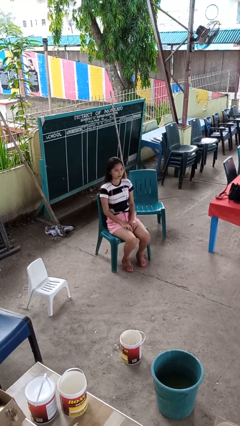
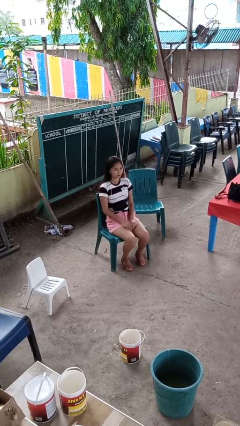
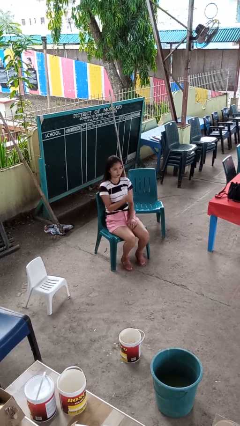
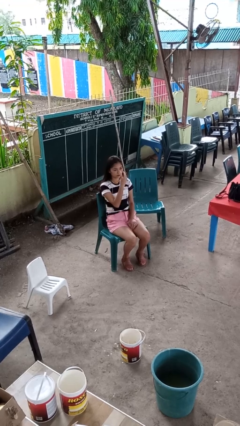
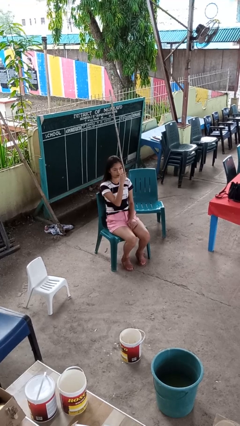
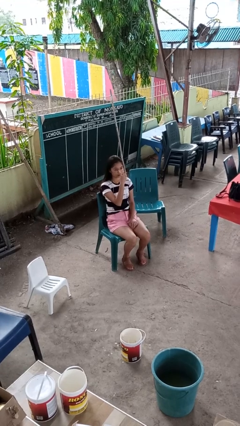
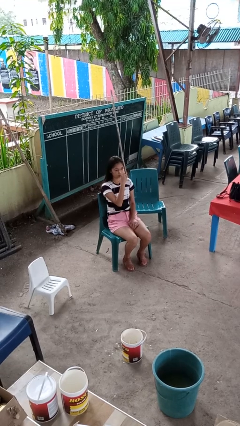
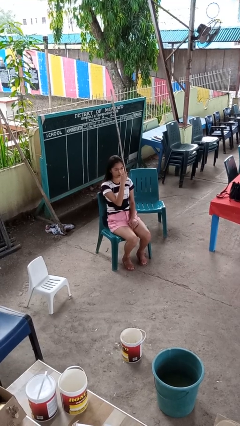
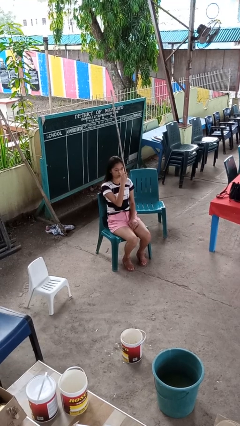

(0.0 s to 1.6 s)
person gestures watch closely

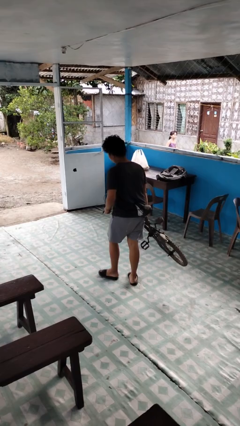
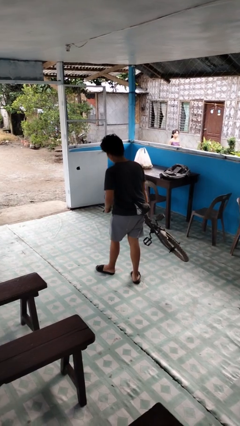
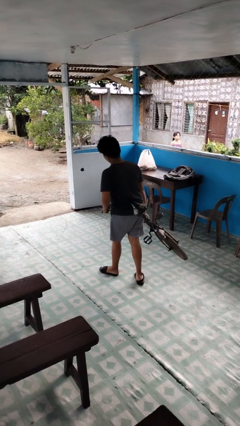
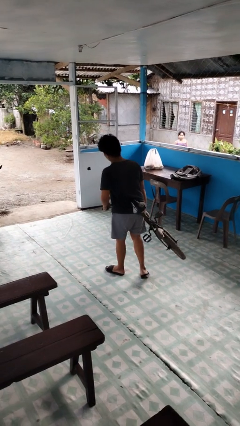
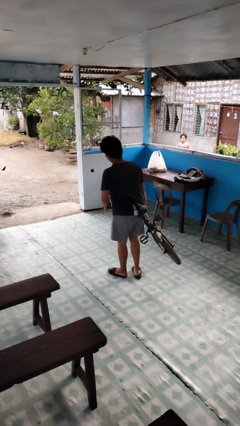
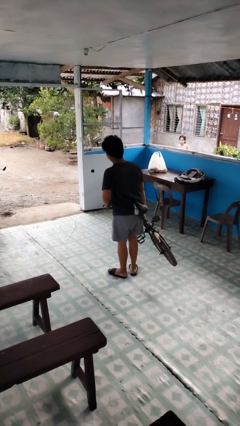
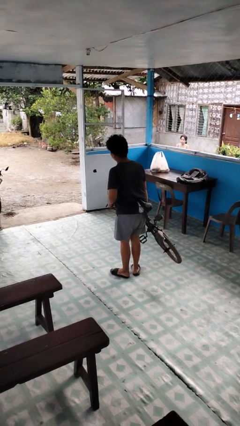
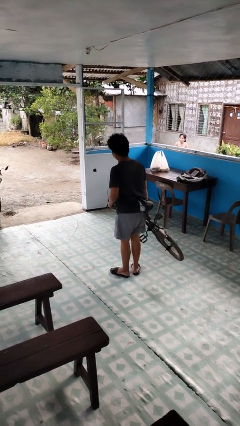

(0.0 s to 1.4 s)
person carries bicycle

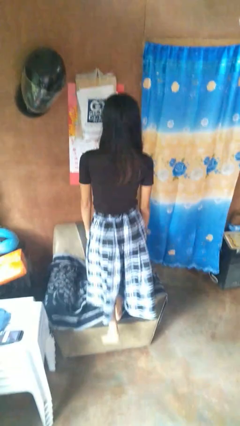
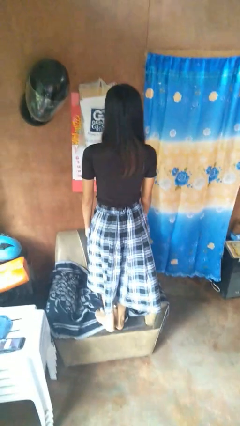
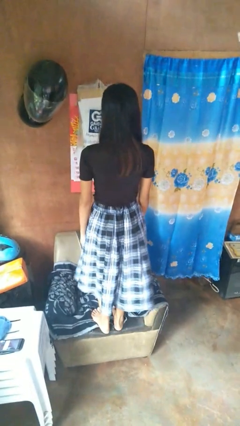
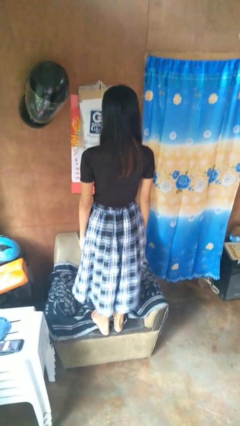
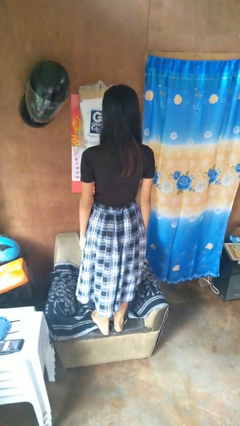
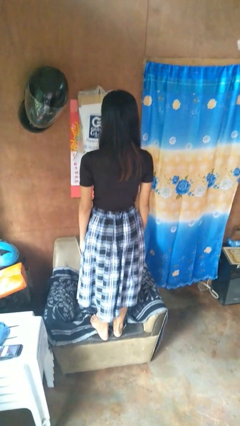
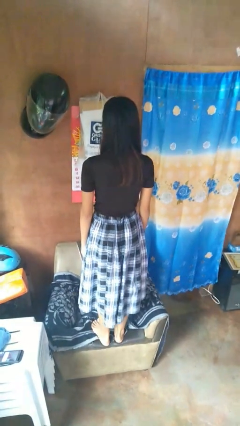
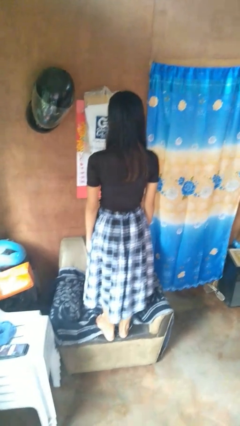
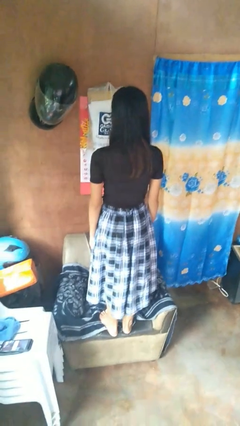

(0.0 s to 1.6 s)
person climbs on couch

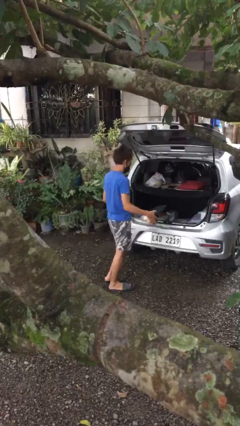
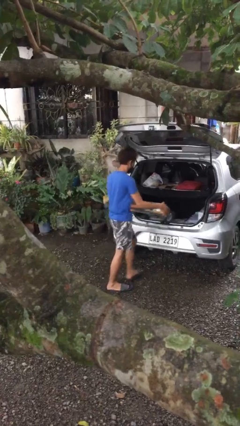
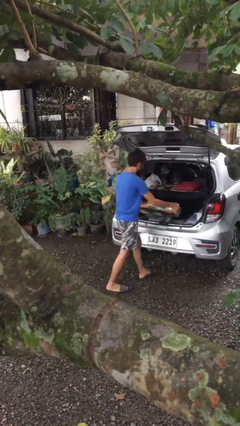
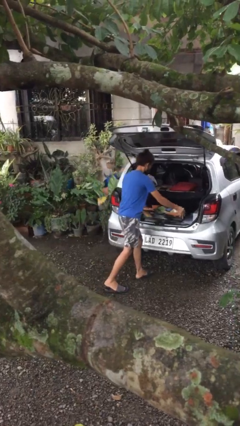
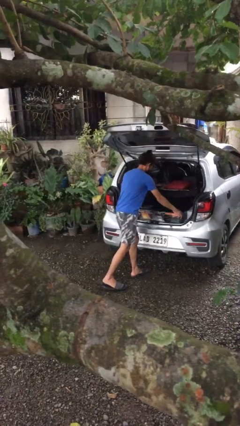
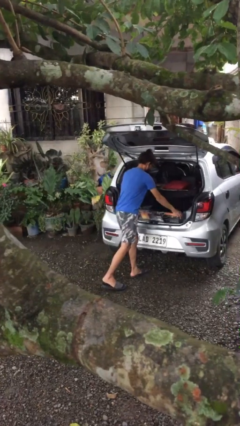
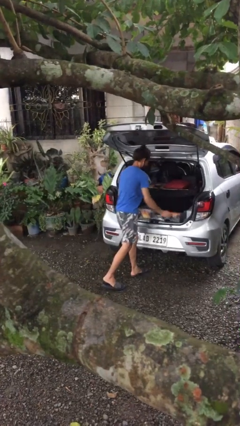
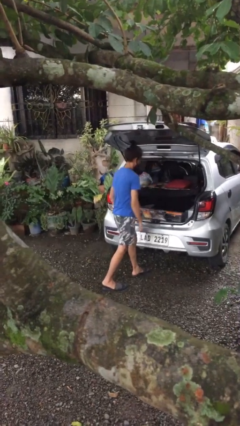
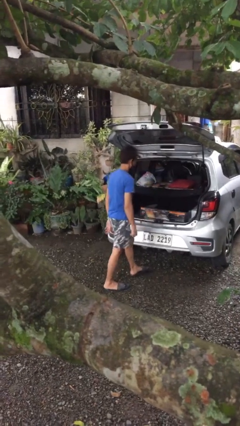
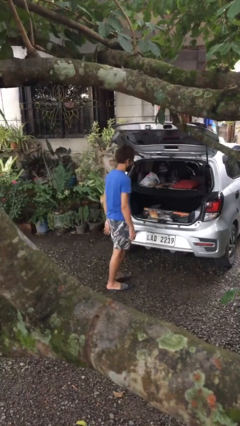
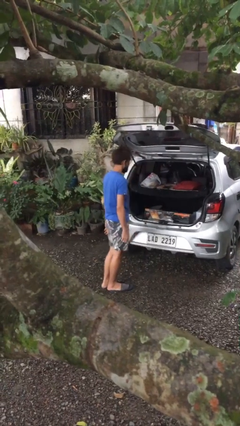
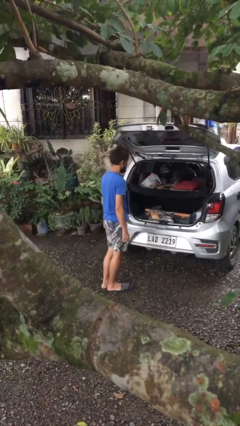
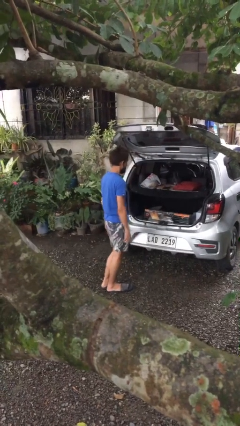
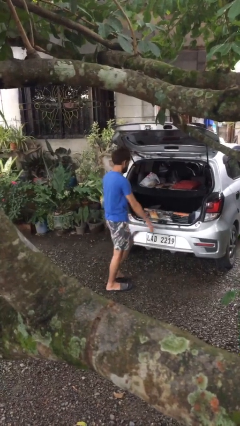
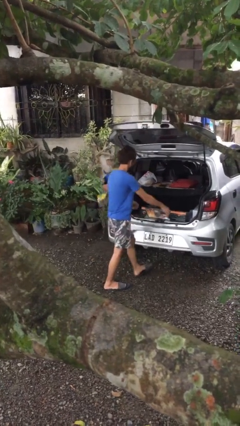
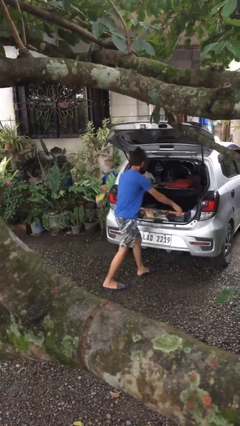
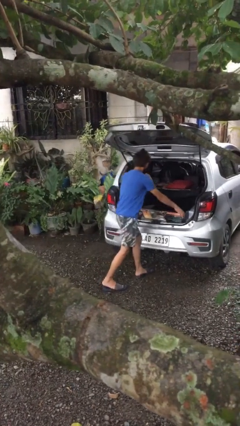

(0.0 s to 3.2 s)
person loads car

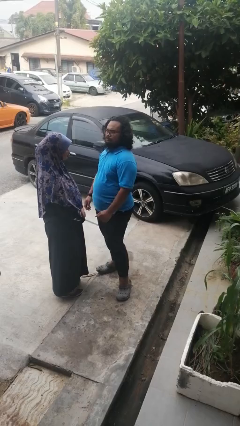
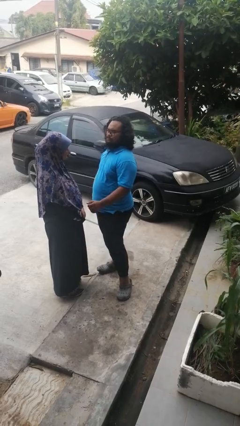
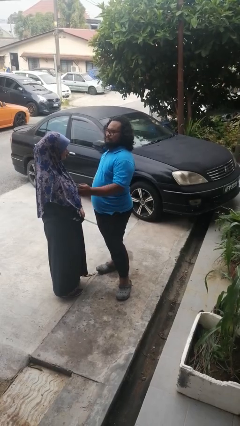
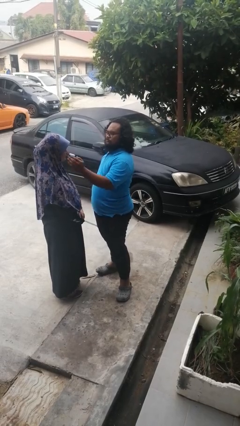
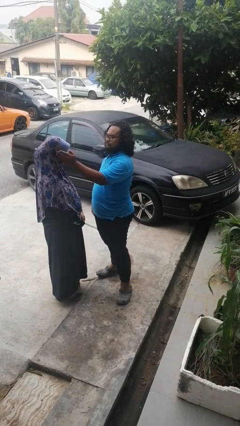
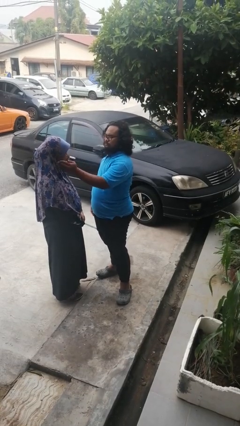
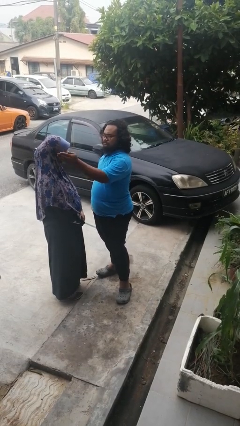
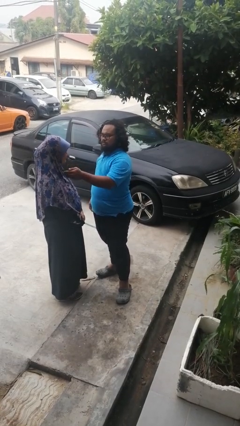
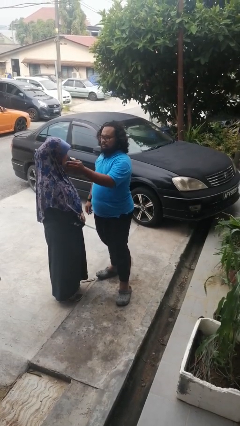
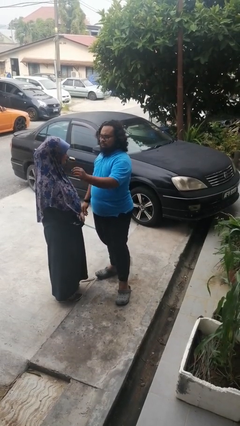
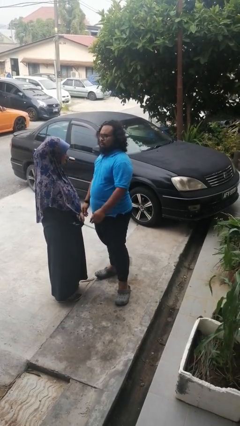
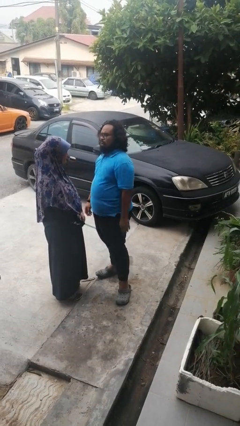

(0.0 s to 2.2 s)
person touches face of person

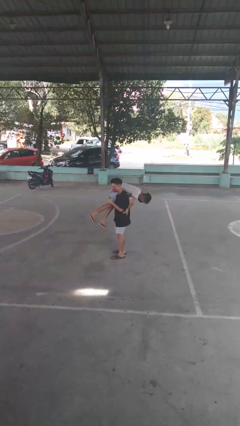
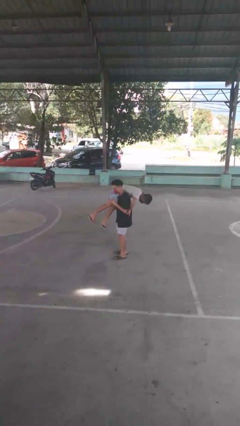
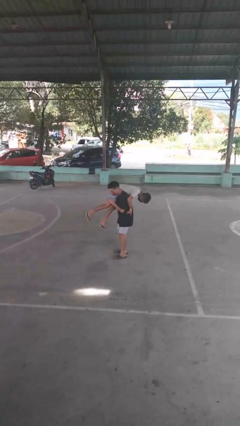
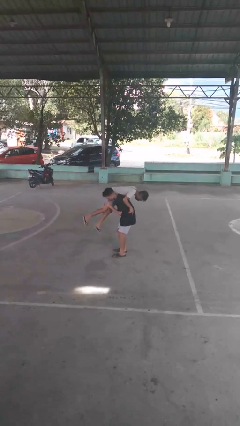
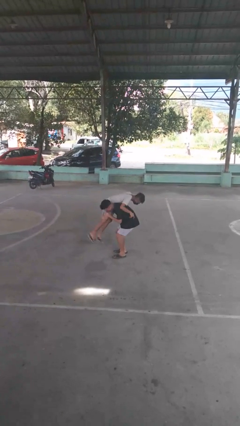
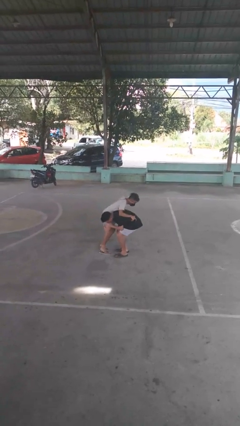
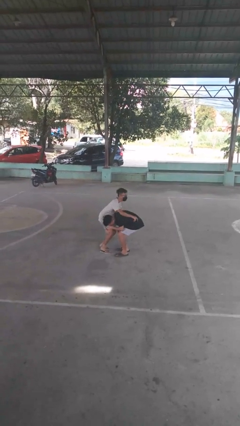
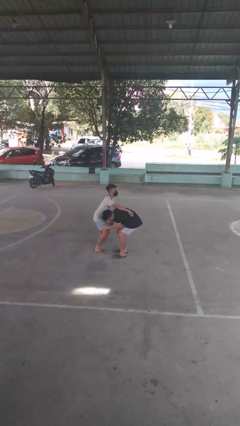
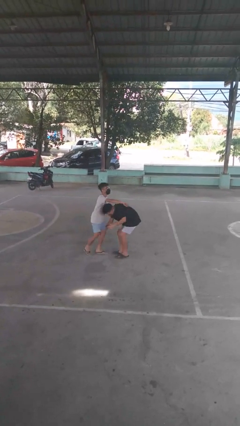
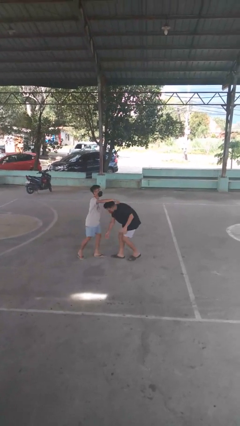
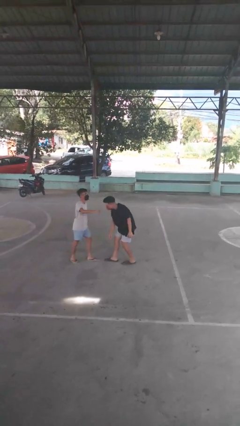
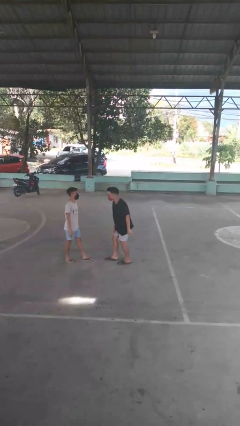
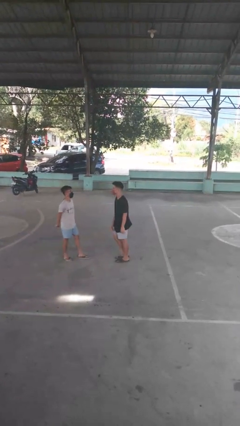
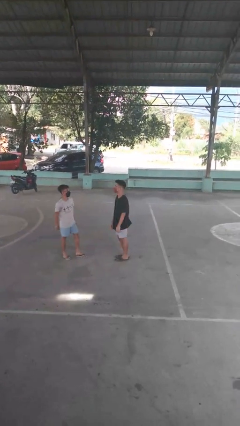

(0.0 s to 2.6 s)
person puts down person

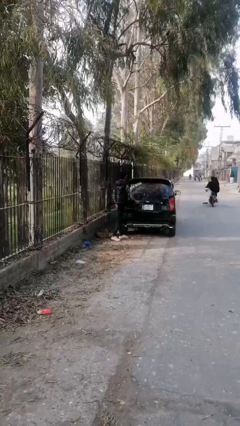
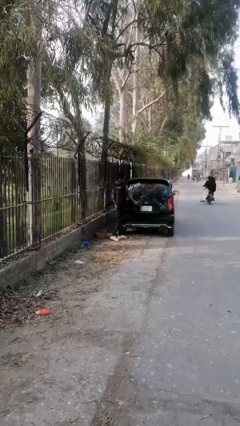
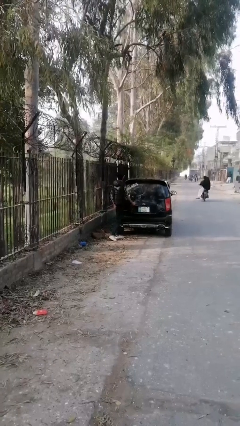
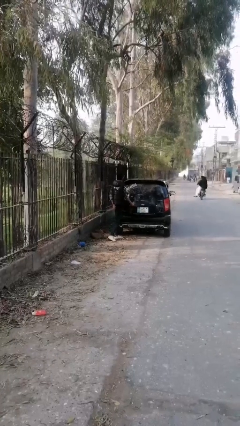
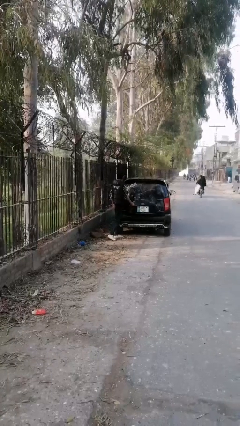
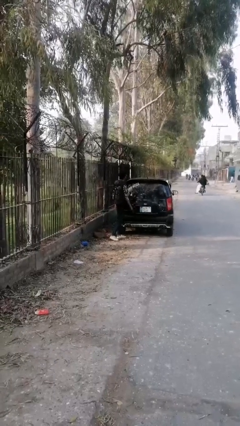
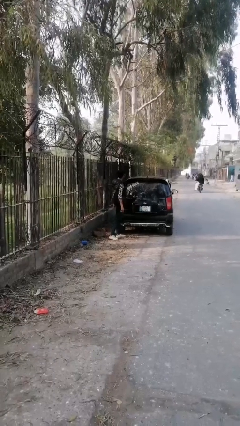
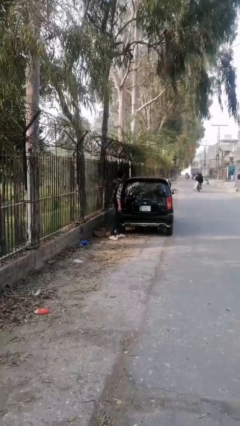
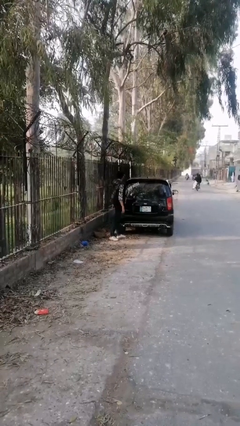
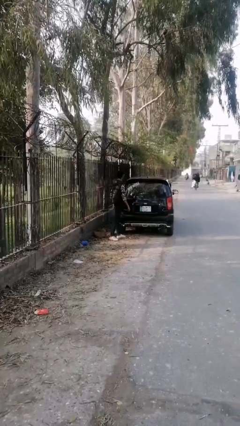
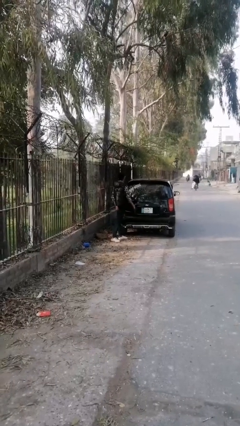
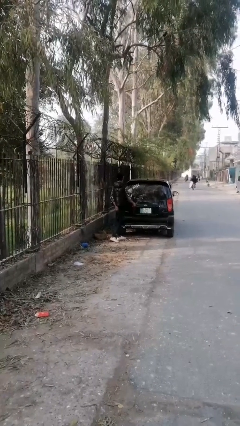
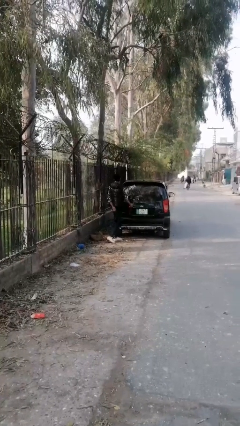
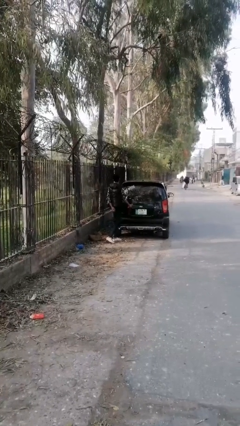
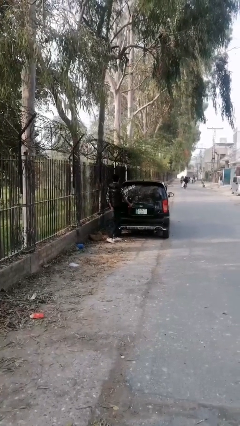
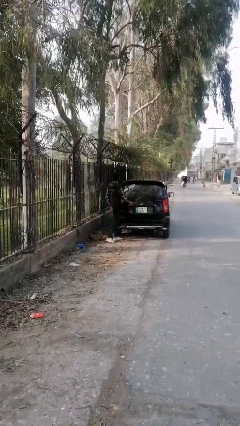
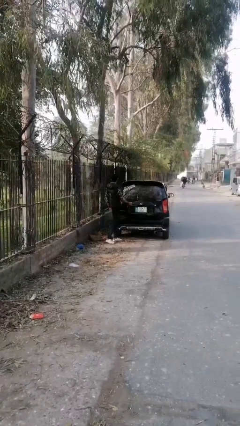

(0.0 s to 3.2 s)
person closes car trunk

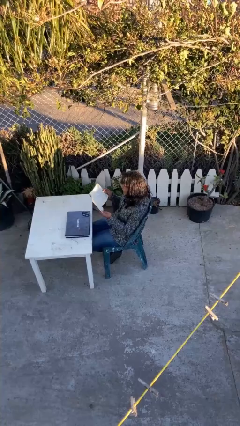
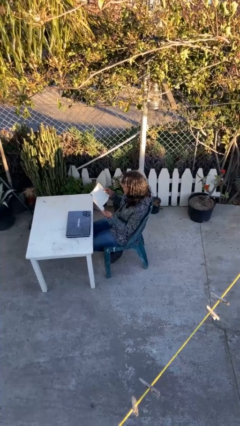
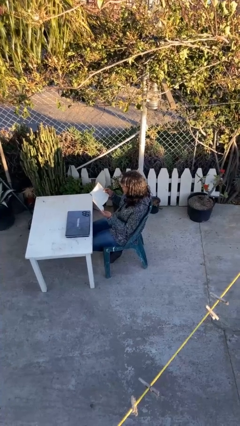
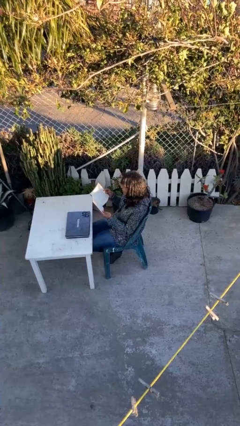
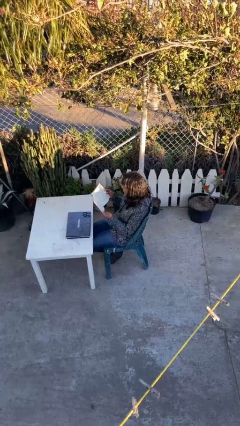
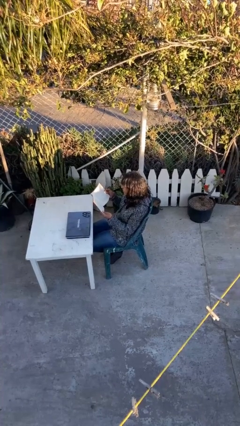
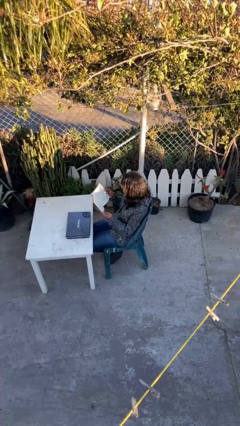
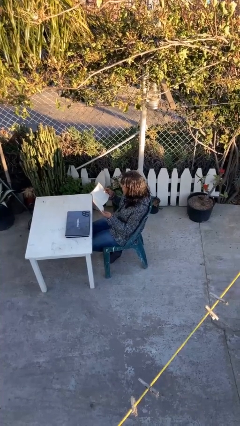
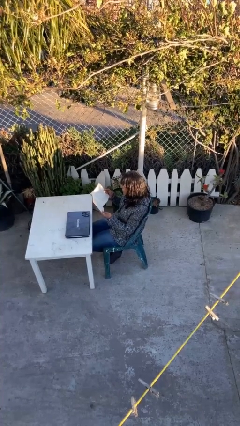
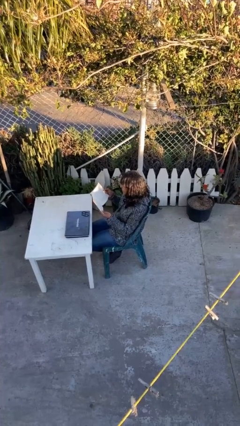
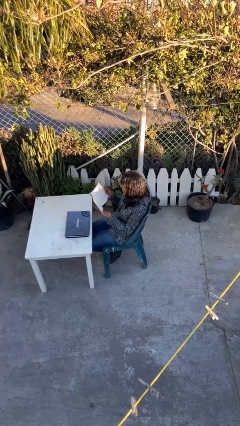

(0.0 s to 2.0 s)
person reads document
